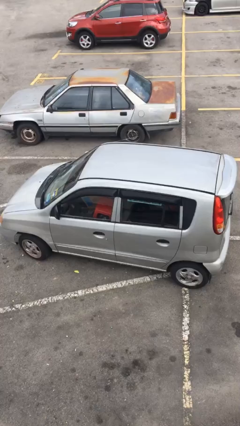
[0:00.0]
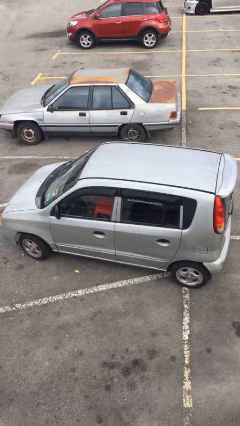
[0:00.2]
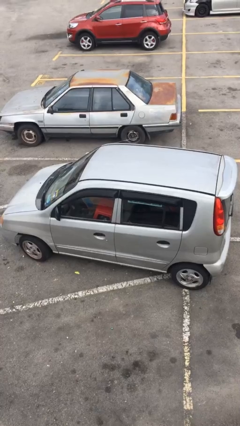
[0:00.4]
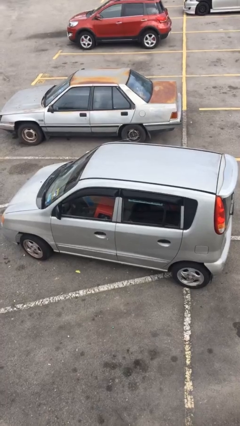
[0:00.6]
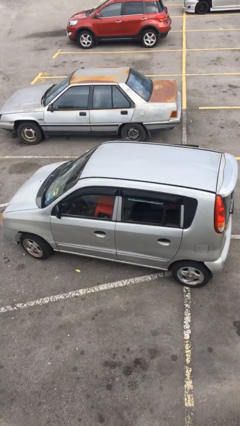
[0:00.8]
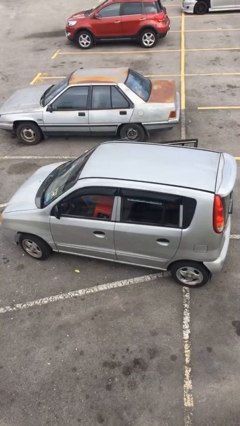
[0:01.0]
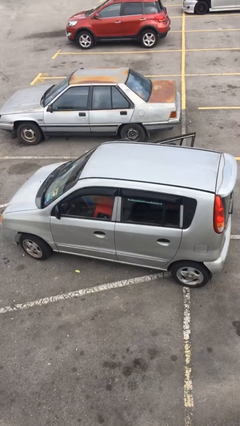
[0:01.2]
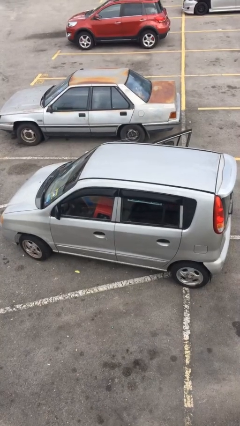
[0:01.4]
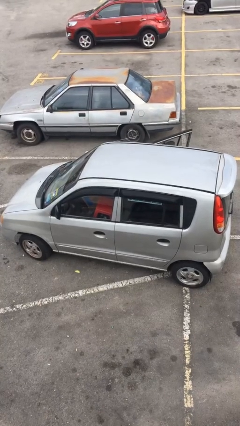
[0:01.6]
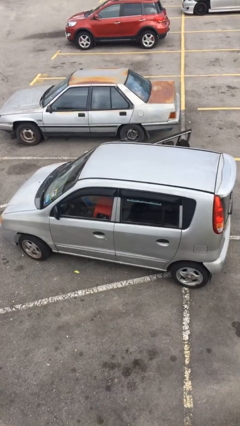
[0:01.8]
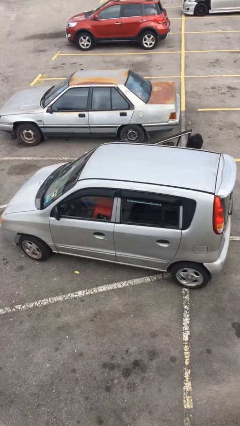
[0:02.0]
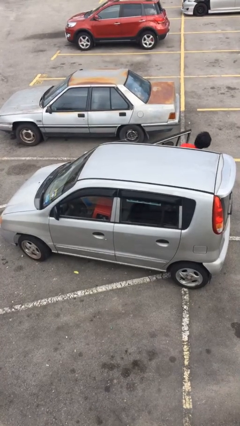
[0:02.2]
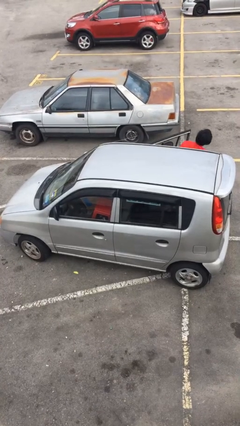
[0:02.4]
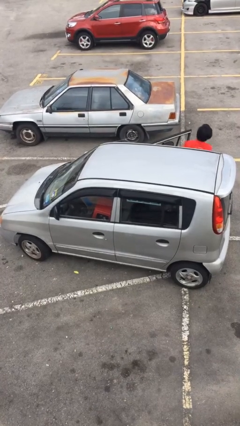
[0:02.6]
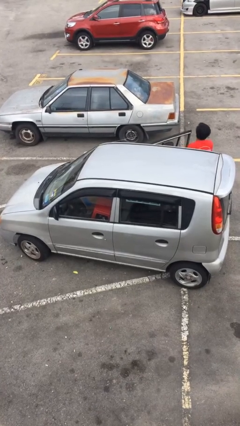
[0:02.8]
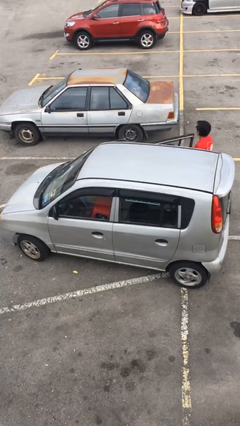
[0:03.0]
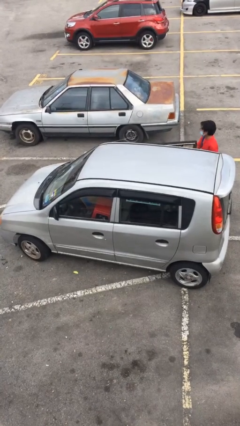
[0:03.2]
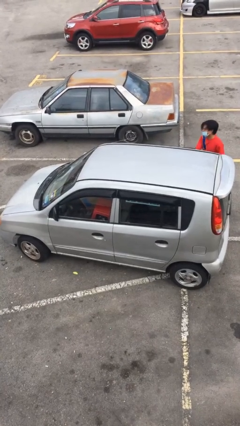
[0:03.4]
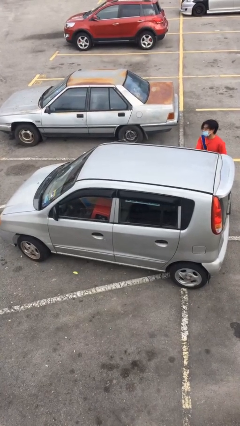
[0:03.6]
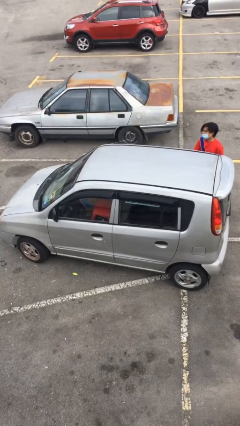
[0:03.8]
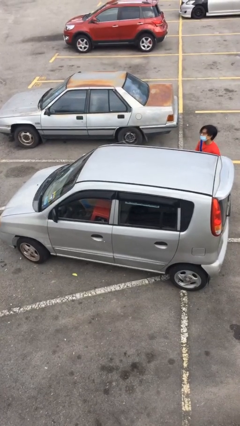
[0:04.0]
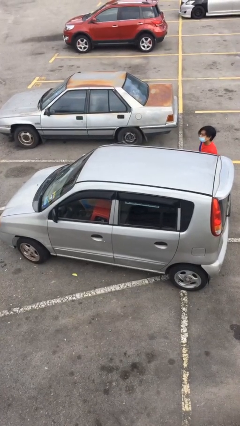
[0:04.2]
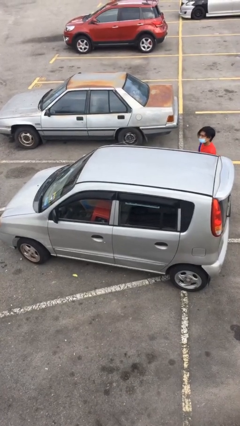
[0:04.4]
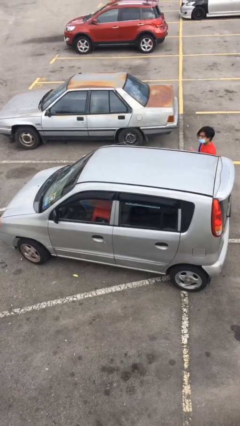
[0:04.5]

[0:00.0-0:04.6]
car drops off person

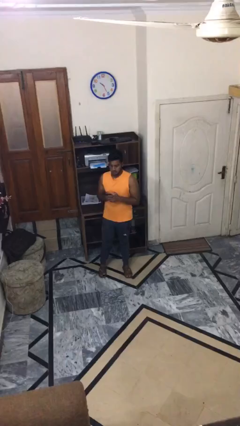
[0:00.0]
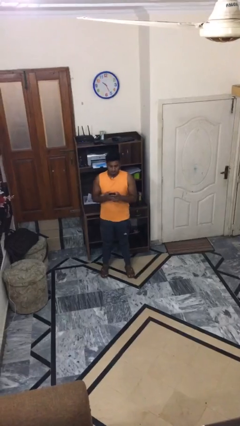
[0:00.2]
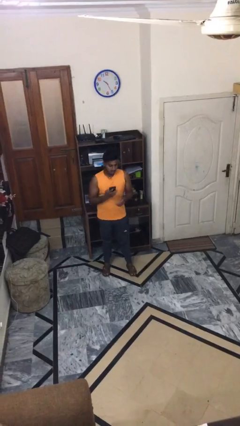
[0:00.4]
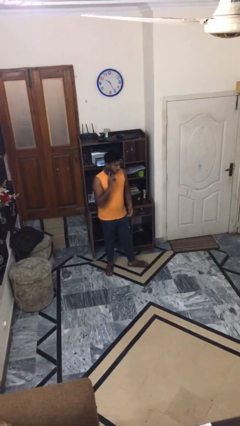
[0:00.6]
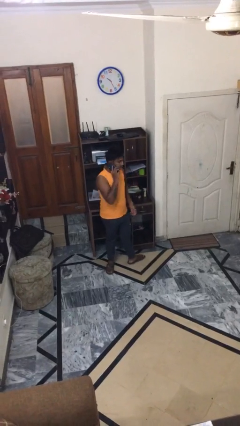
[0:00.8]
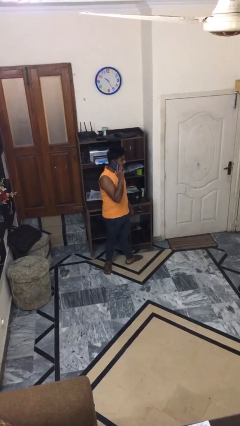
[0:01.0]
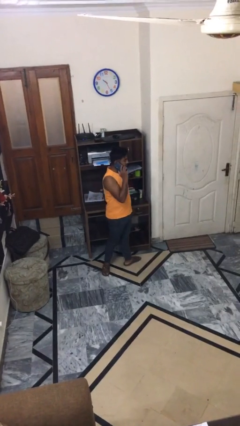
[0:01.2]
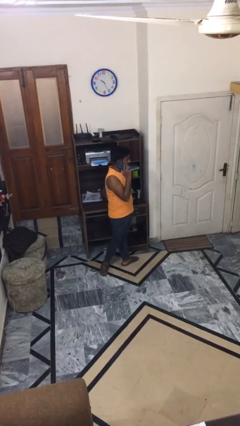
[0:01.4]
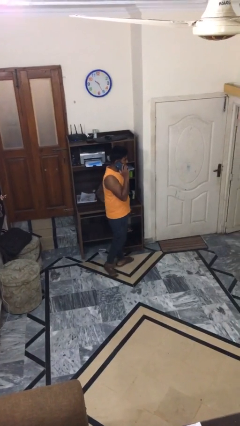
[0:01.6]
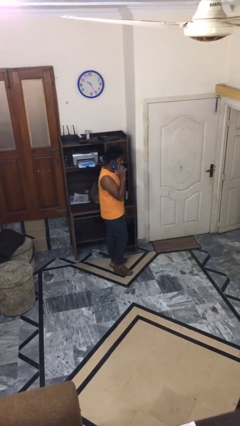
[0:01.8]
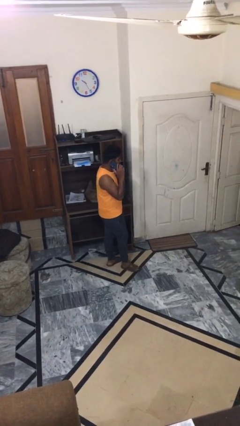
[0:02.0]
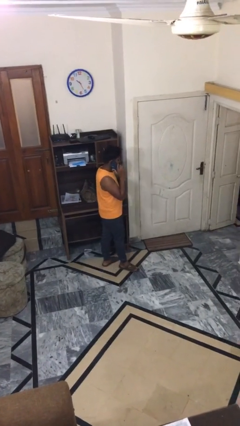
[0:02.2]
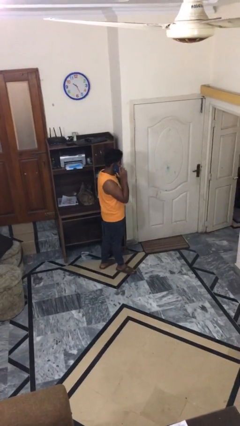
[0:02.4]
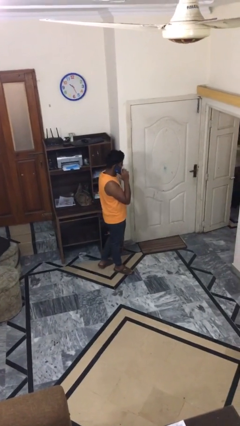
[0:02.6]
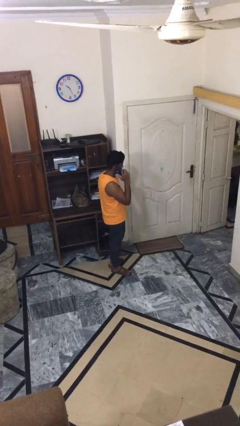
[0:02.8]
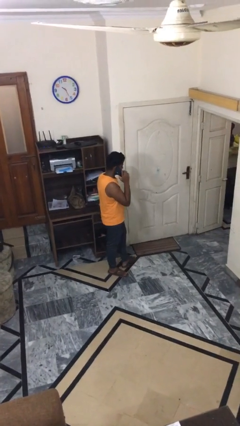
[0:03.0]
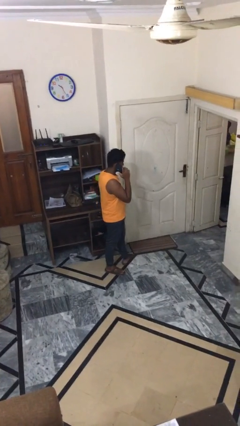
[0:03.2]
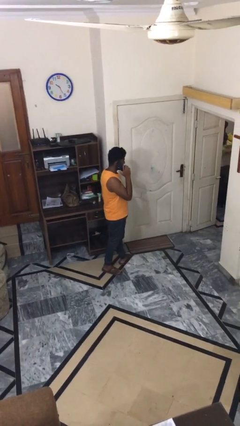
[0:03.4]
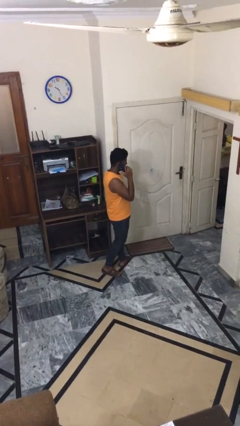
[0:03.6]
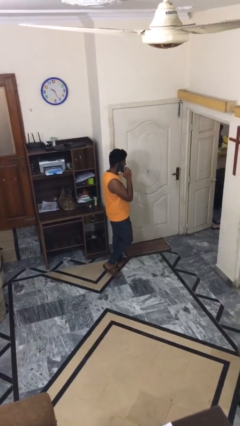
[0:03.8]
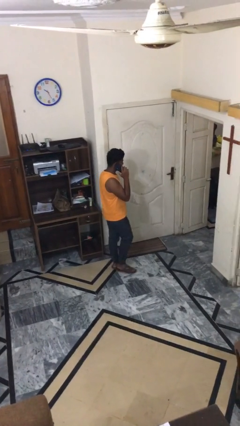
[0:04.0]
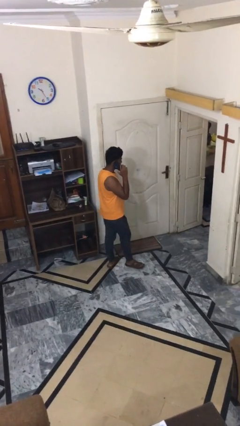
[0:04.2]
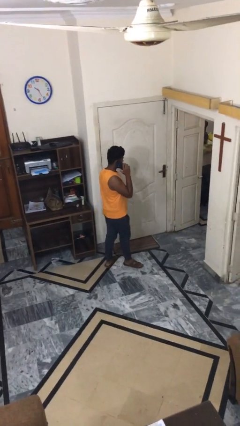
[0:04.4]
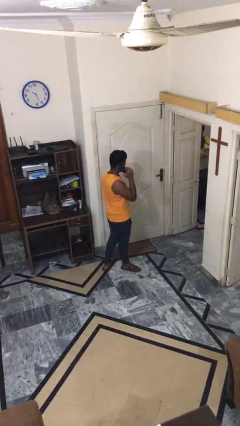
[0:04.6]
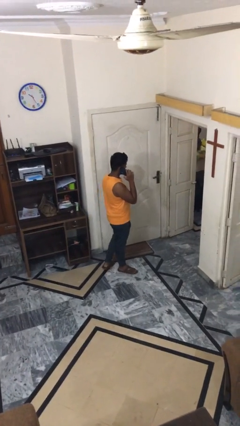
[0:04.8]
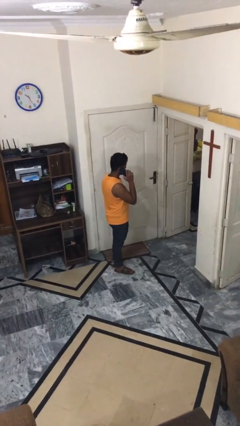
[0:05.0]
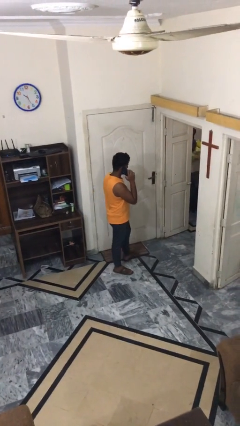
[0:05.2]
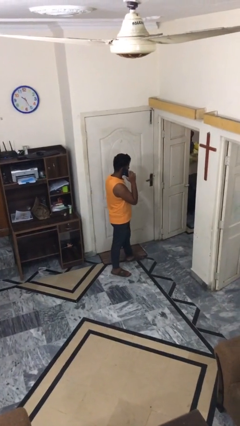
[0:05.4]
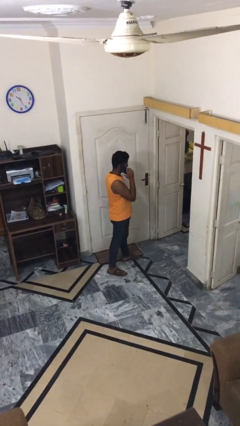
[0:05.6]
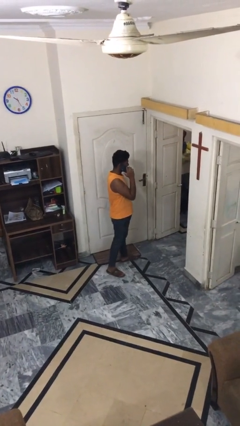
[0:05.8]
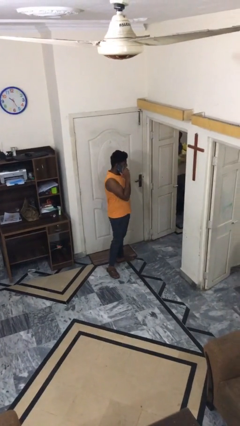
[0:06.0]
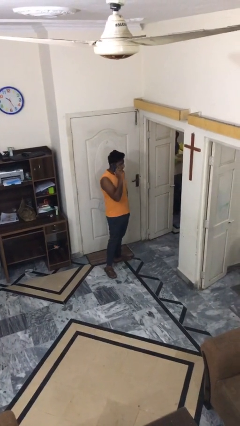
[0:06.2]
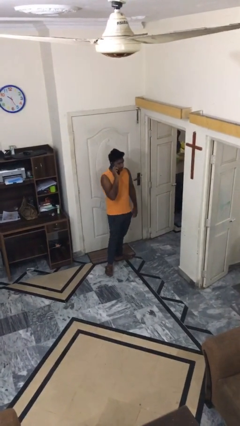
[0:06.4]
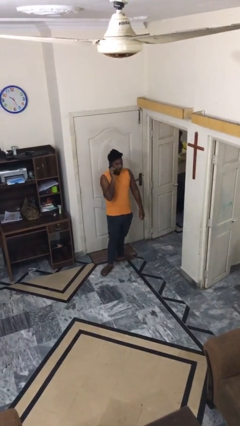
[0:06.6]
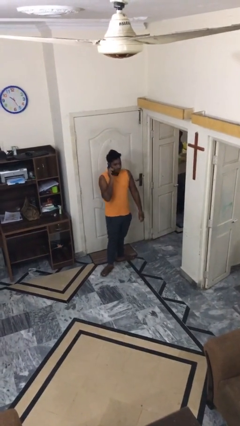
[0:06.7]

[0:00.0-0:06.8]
person talks on phone

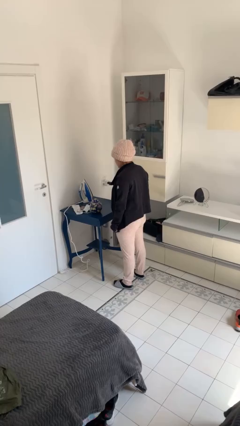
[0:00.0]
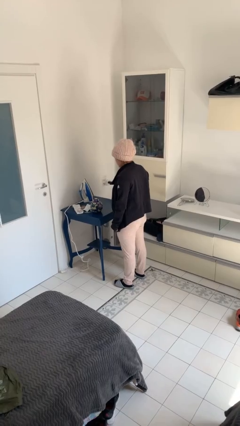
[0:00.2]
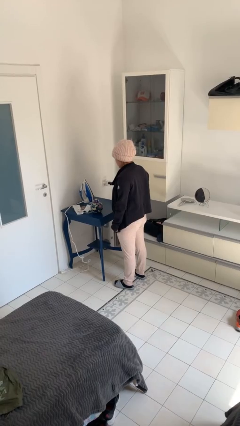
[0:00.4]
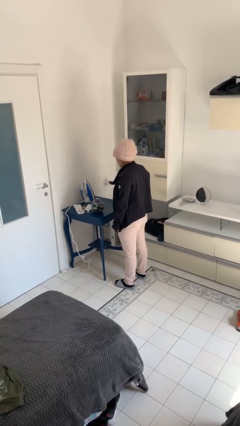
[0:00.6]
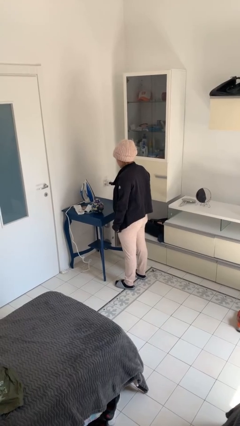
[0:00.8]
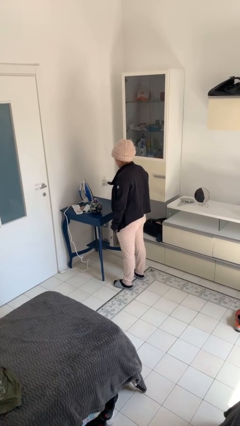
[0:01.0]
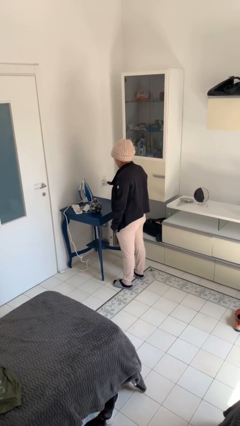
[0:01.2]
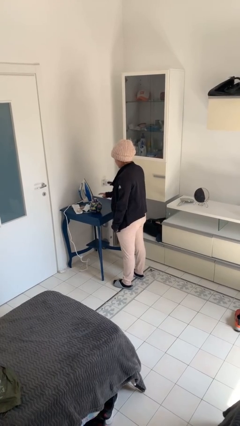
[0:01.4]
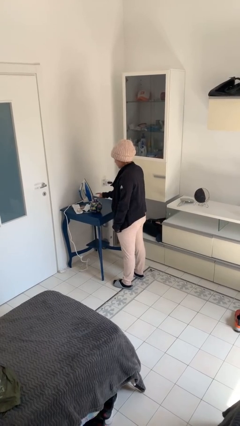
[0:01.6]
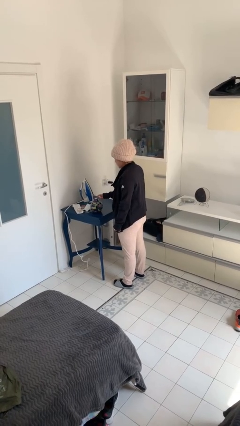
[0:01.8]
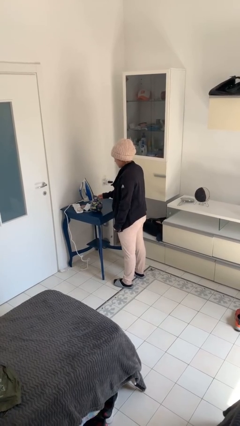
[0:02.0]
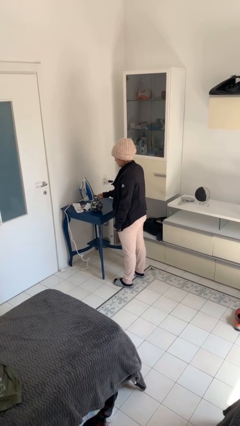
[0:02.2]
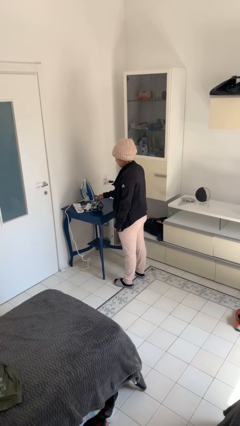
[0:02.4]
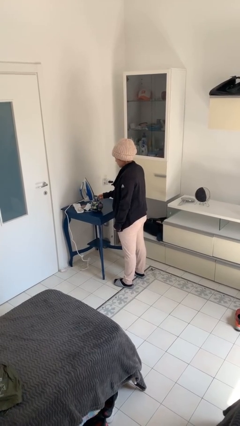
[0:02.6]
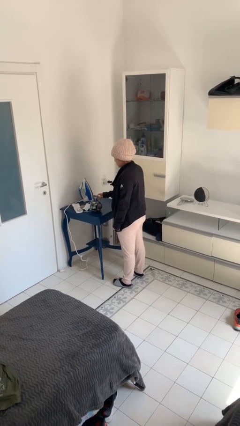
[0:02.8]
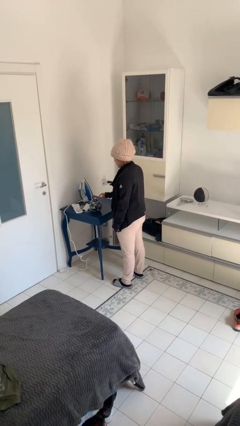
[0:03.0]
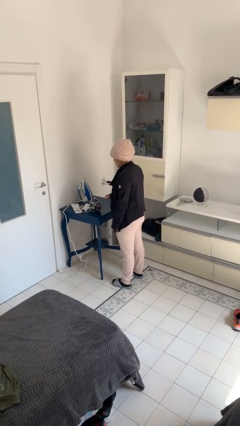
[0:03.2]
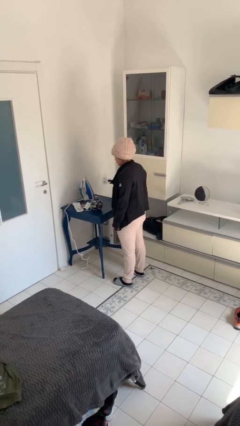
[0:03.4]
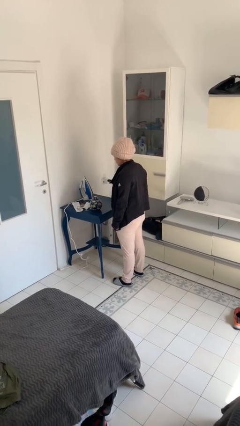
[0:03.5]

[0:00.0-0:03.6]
person taps object with finger

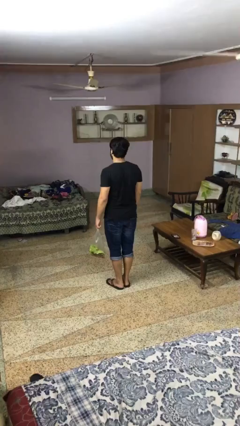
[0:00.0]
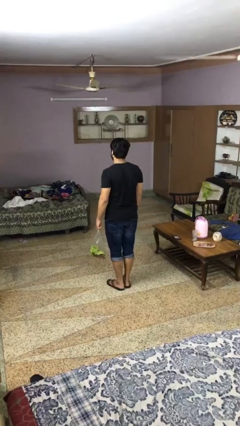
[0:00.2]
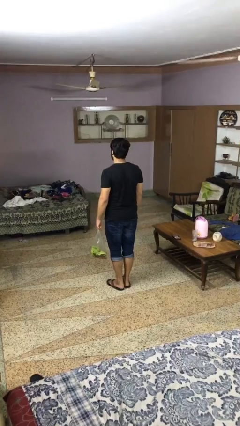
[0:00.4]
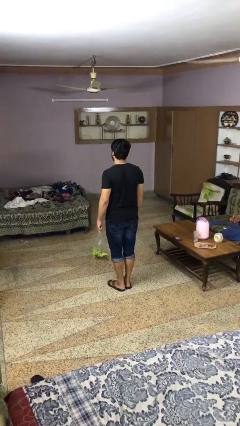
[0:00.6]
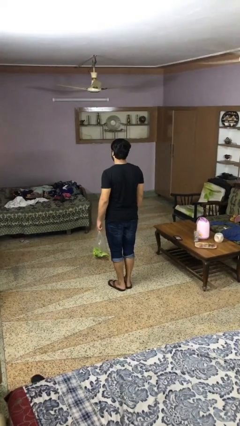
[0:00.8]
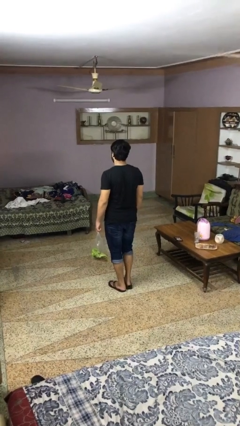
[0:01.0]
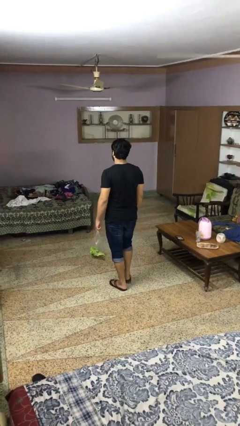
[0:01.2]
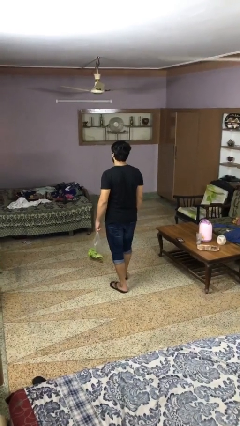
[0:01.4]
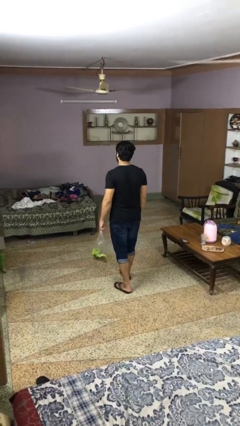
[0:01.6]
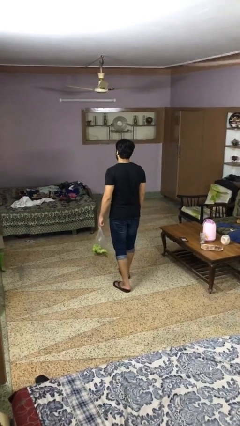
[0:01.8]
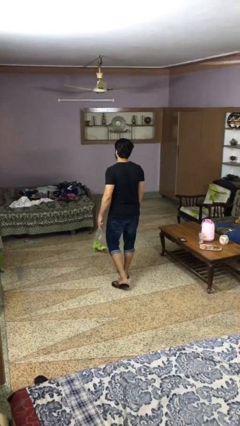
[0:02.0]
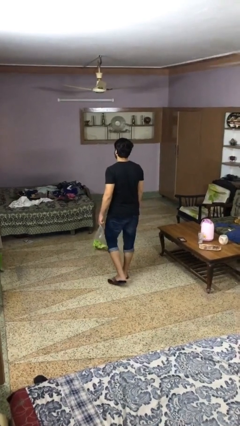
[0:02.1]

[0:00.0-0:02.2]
person carries groceries

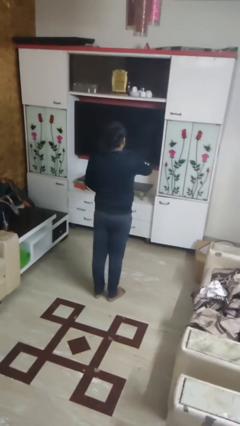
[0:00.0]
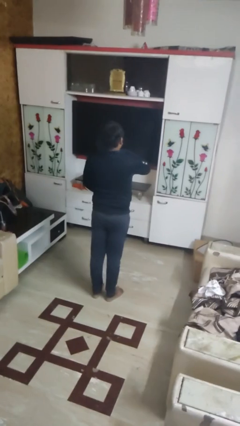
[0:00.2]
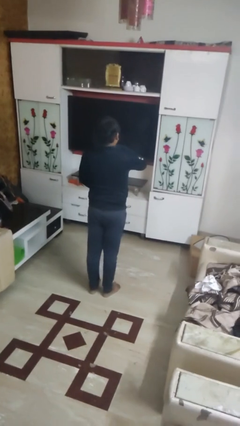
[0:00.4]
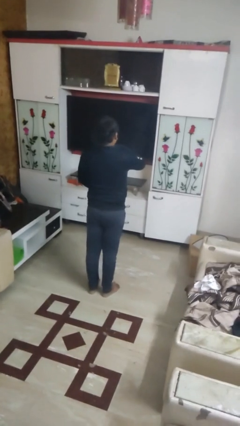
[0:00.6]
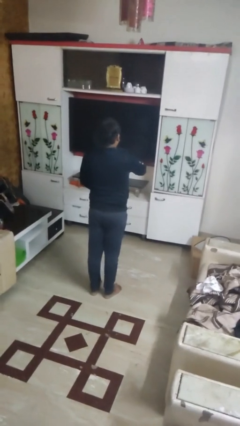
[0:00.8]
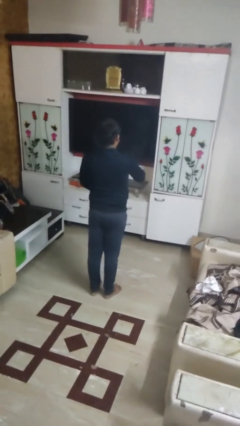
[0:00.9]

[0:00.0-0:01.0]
person zips up jacket
